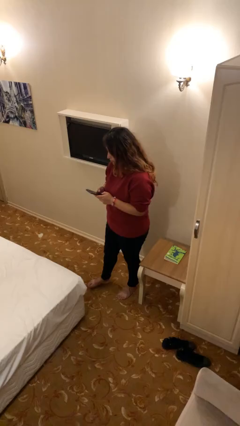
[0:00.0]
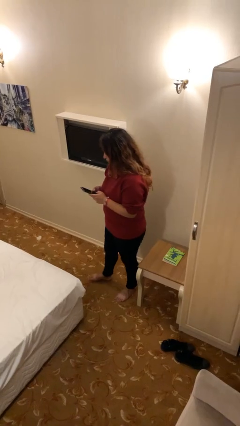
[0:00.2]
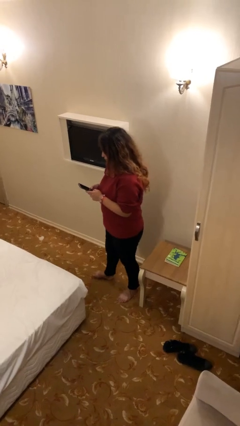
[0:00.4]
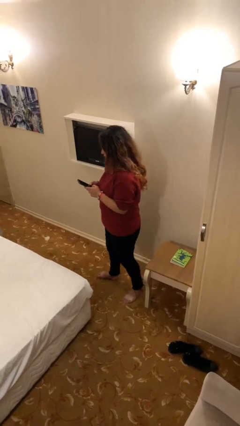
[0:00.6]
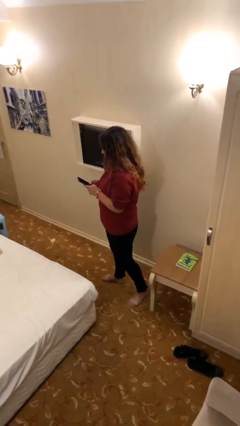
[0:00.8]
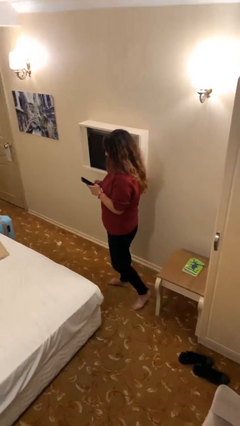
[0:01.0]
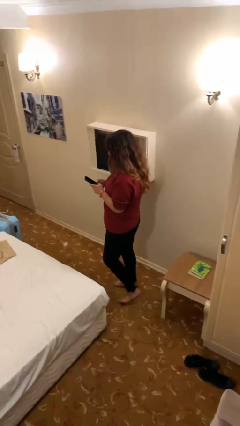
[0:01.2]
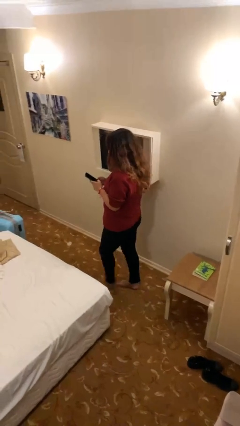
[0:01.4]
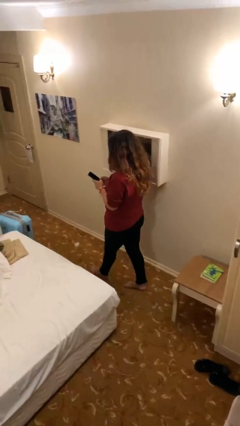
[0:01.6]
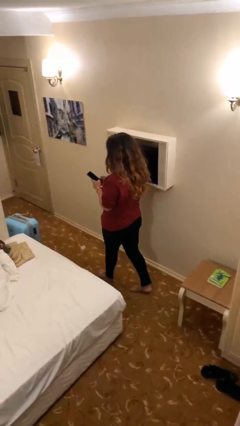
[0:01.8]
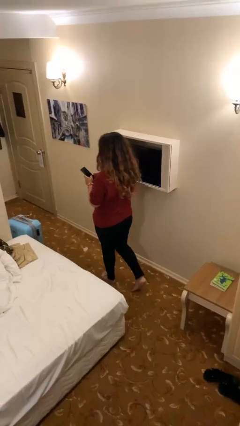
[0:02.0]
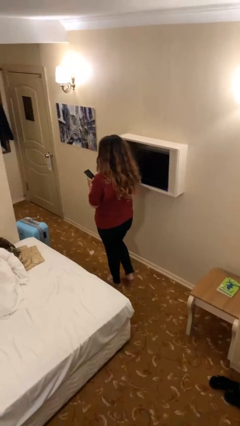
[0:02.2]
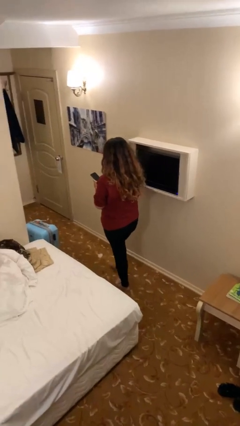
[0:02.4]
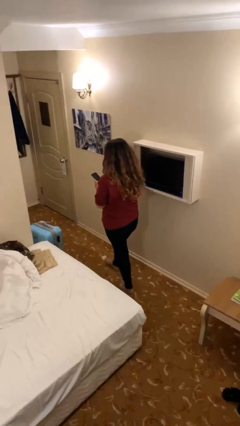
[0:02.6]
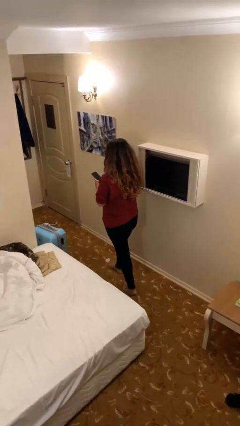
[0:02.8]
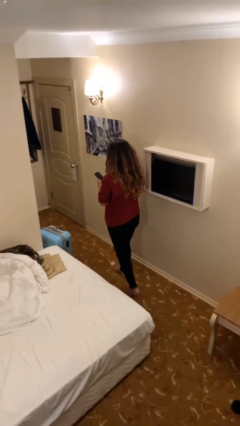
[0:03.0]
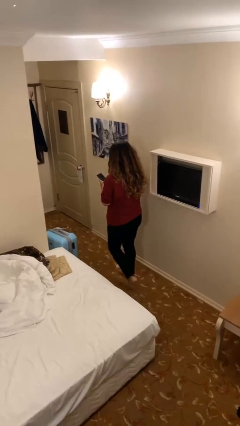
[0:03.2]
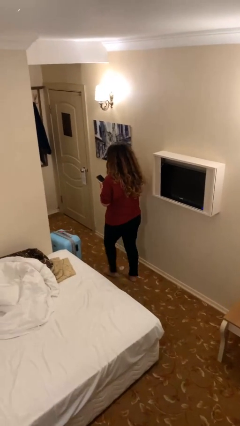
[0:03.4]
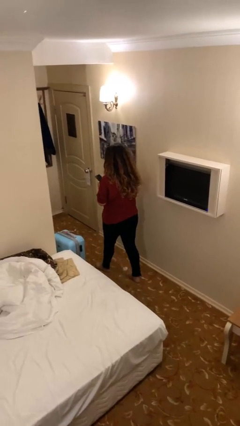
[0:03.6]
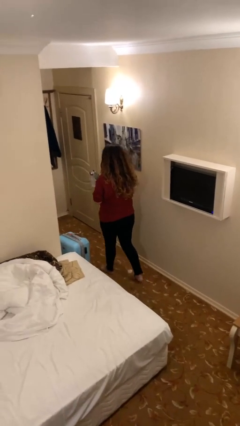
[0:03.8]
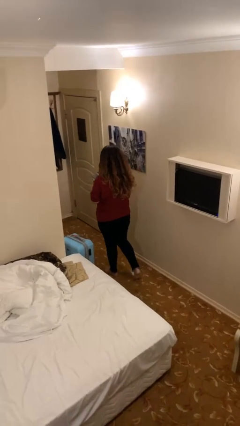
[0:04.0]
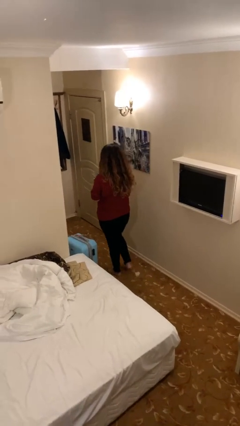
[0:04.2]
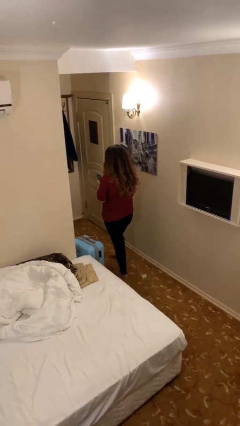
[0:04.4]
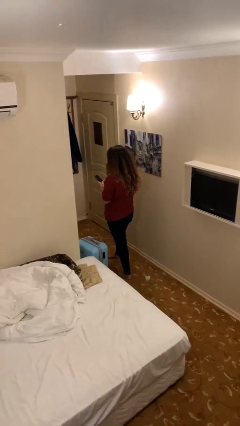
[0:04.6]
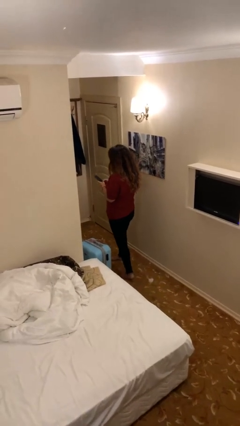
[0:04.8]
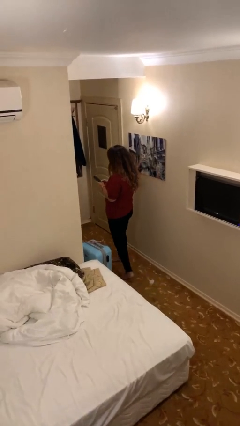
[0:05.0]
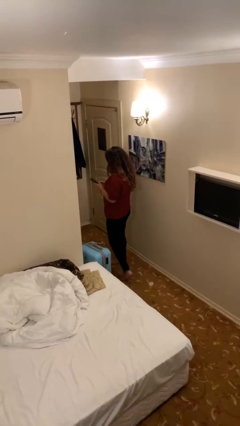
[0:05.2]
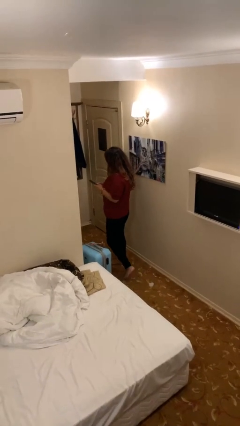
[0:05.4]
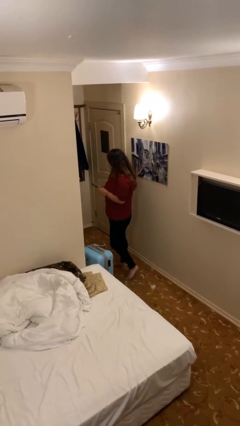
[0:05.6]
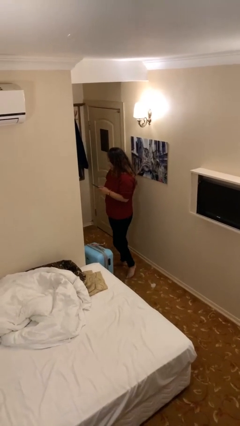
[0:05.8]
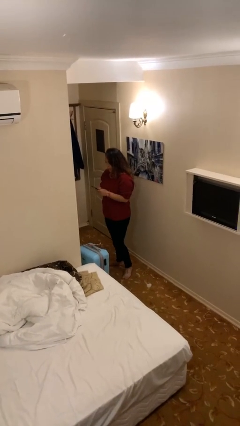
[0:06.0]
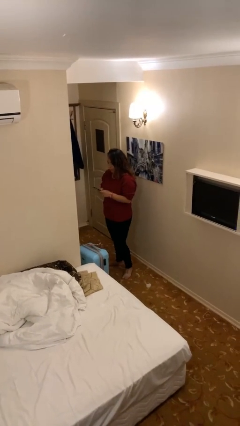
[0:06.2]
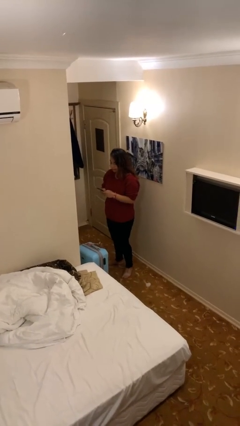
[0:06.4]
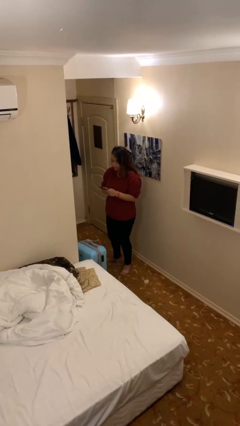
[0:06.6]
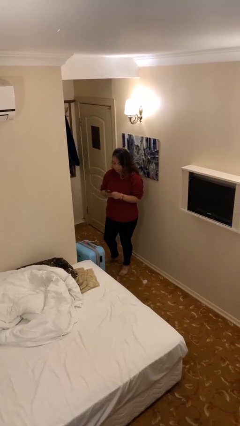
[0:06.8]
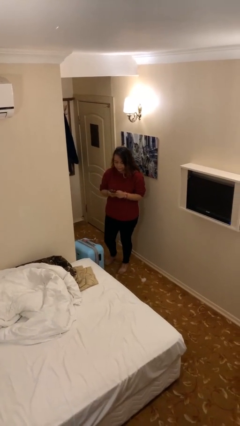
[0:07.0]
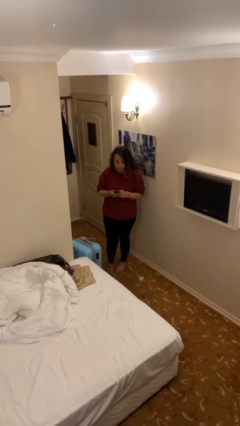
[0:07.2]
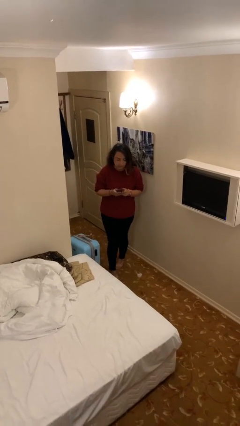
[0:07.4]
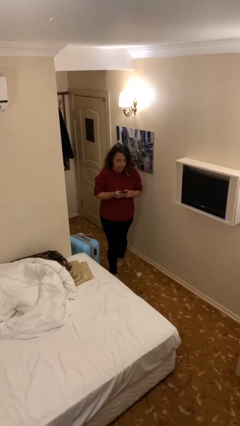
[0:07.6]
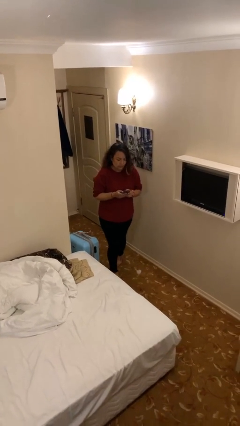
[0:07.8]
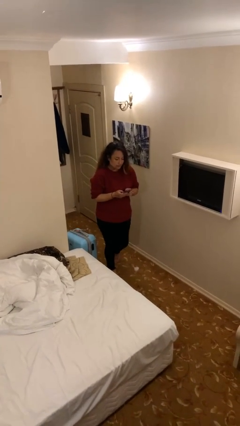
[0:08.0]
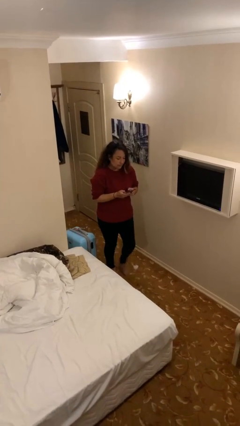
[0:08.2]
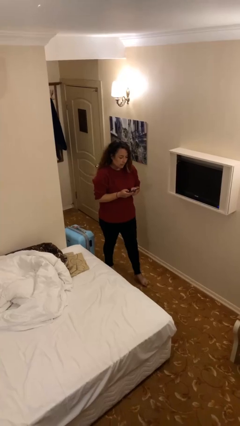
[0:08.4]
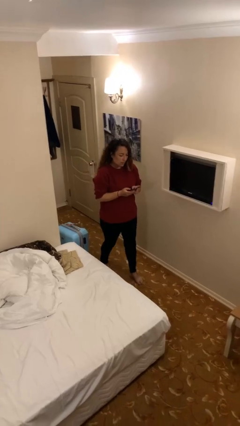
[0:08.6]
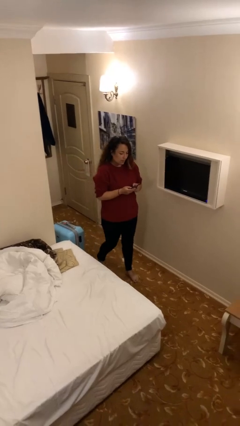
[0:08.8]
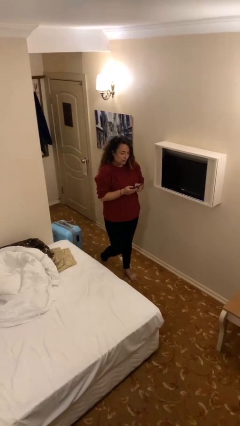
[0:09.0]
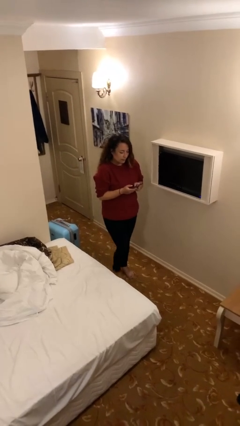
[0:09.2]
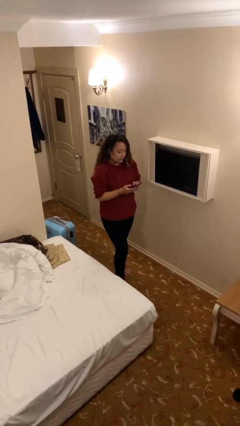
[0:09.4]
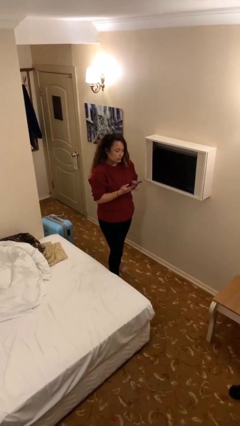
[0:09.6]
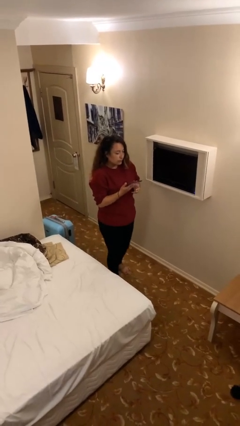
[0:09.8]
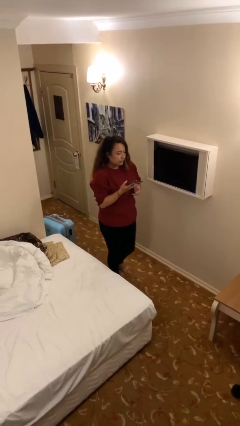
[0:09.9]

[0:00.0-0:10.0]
person texts on phone

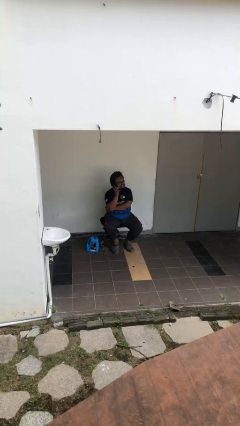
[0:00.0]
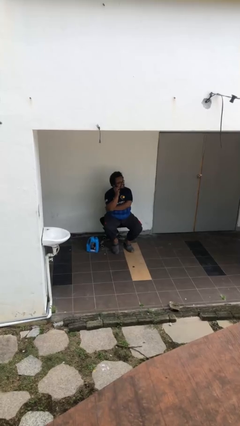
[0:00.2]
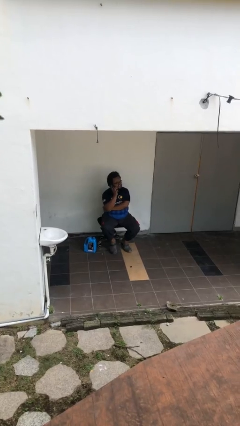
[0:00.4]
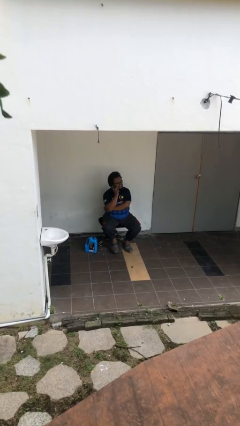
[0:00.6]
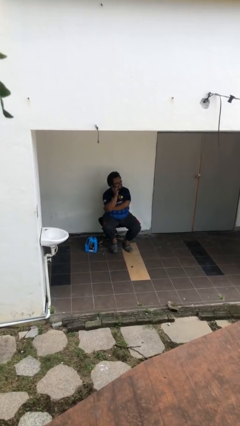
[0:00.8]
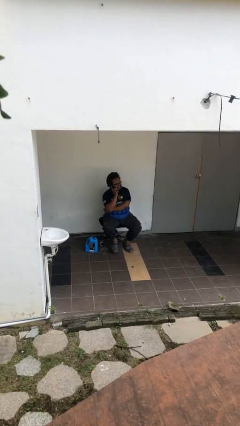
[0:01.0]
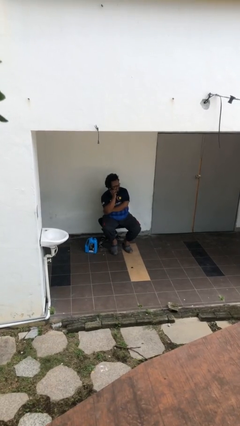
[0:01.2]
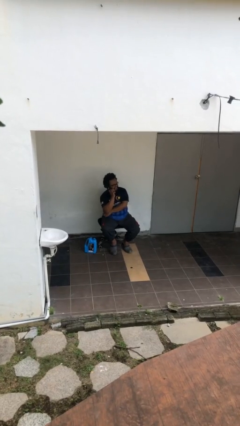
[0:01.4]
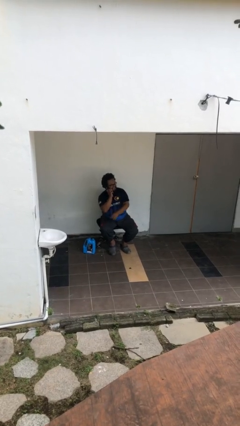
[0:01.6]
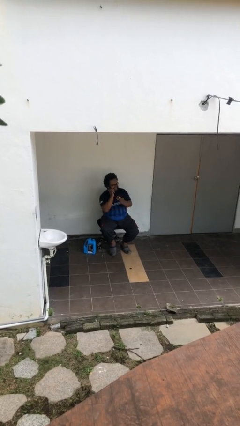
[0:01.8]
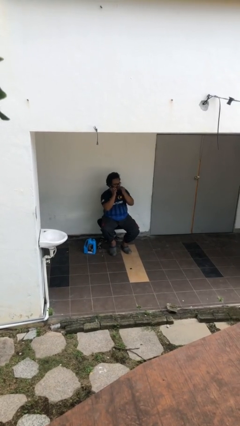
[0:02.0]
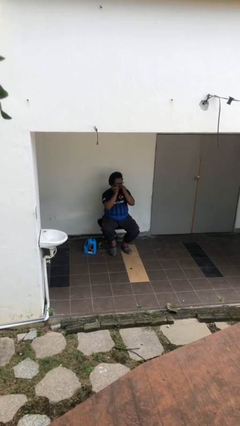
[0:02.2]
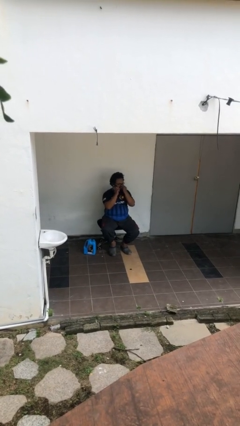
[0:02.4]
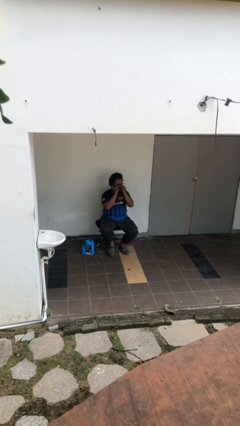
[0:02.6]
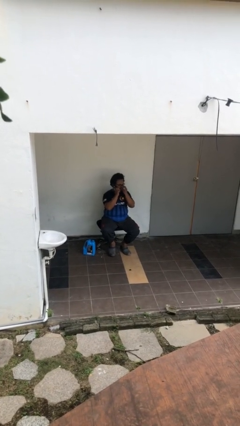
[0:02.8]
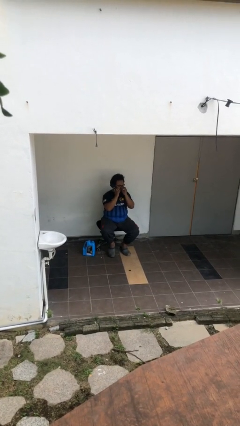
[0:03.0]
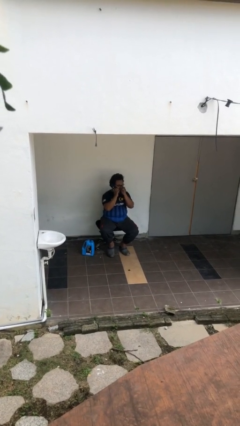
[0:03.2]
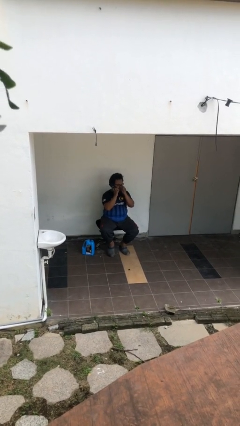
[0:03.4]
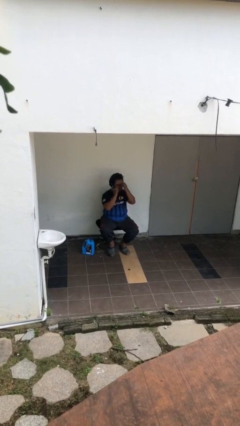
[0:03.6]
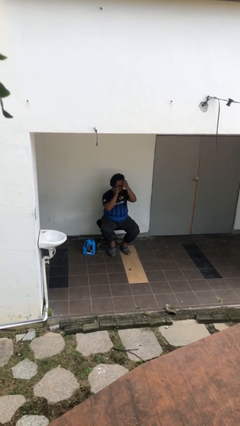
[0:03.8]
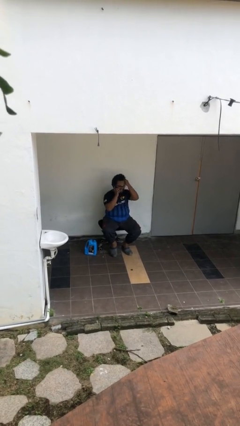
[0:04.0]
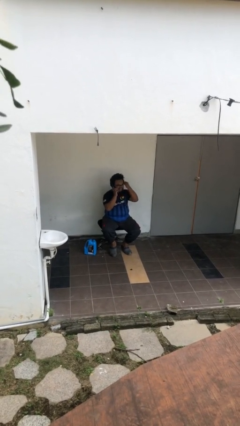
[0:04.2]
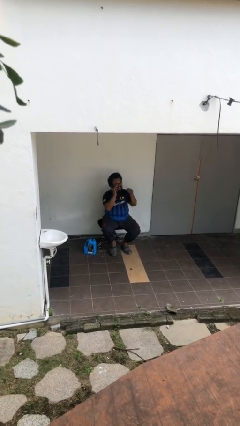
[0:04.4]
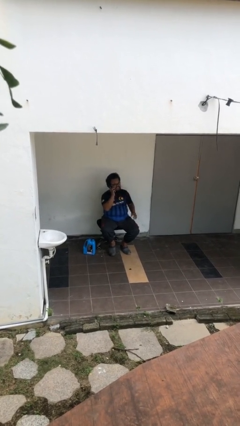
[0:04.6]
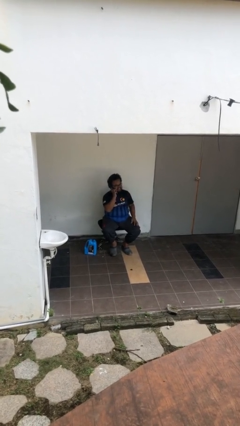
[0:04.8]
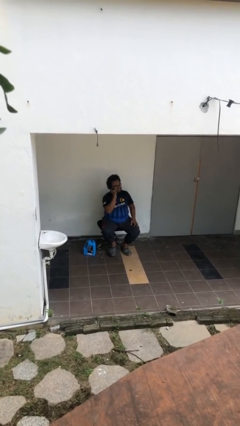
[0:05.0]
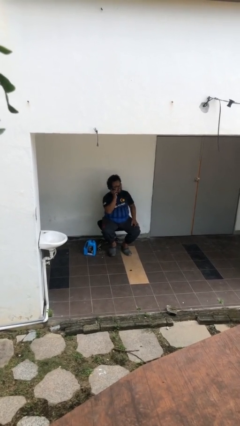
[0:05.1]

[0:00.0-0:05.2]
person talks on phone

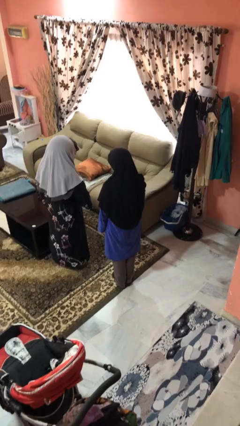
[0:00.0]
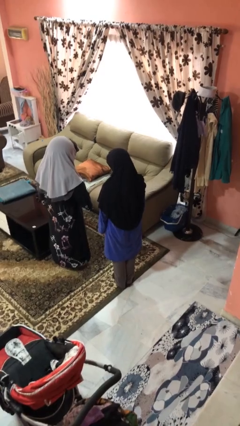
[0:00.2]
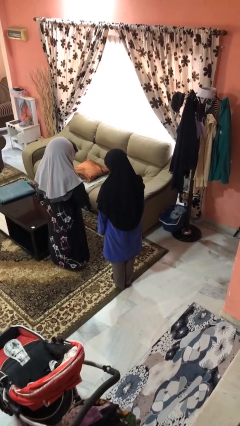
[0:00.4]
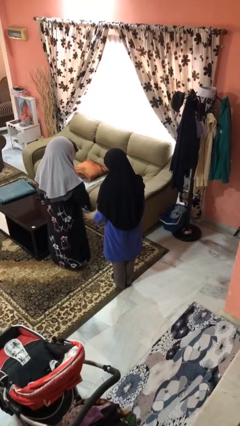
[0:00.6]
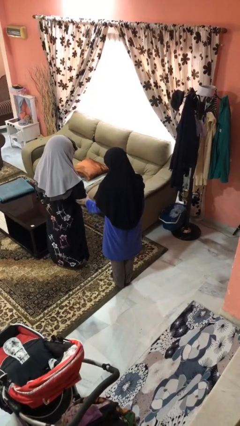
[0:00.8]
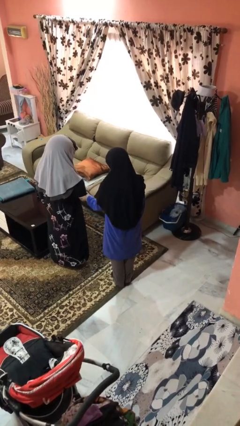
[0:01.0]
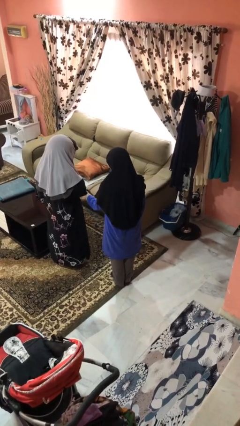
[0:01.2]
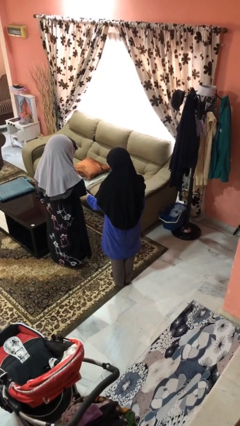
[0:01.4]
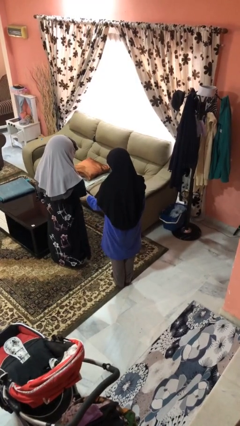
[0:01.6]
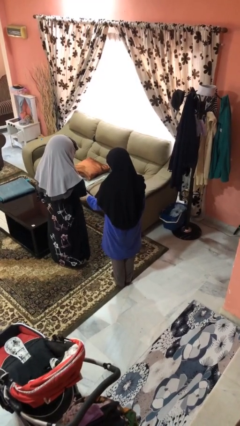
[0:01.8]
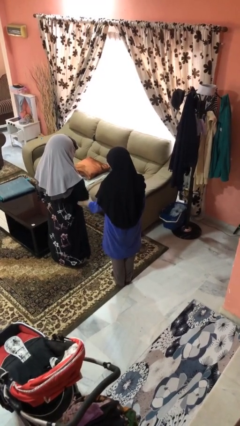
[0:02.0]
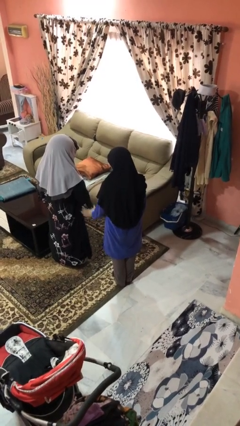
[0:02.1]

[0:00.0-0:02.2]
person grabs person by forearm

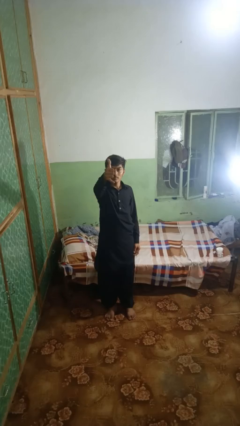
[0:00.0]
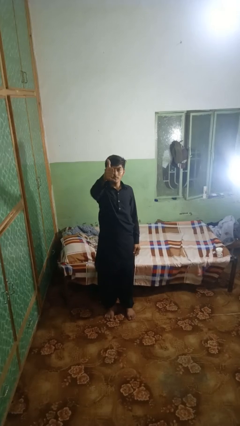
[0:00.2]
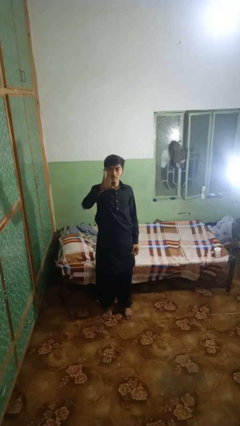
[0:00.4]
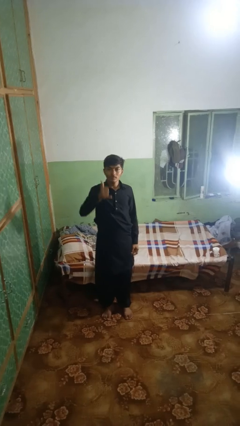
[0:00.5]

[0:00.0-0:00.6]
person gestures hang loose
